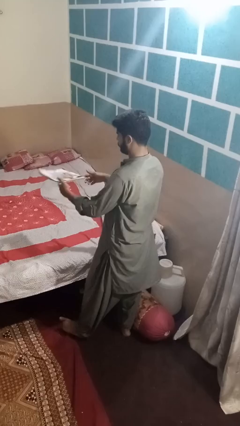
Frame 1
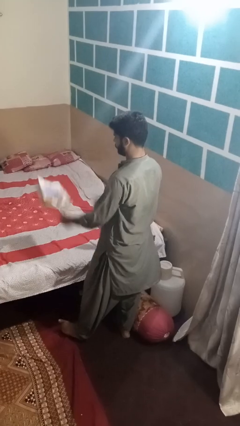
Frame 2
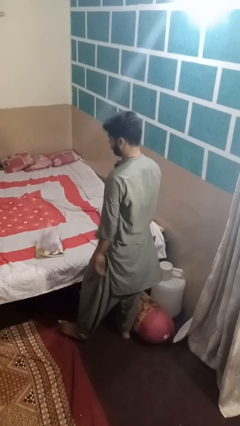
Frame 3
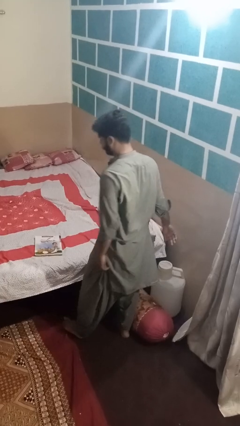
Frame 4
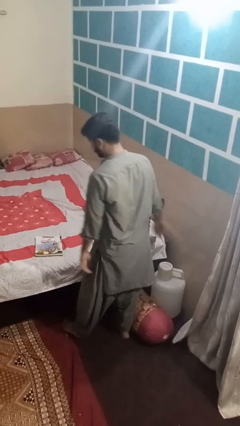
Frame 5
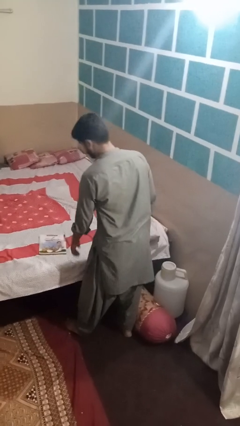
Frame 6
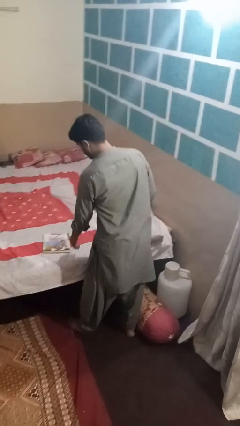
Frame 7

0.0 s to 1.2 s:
person throws object on bed

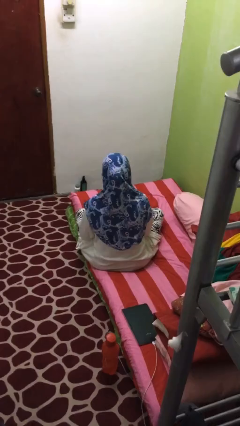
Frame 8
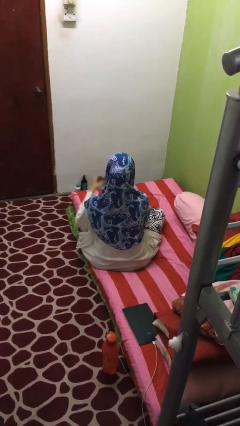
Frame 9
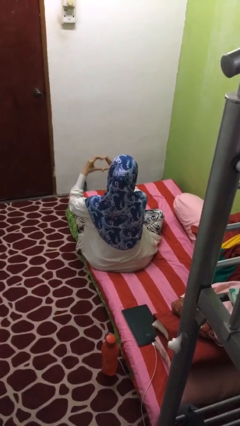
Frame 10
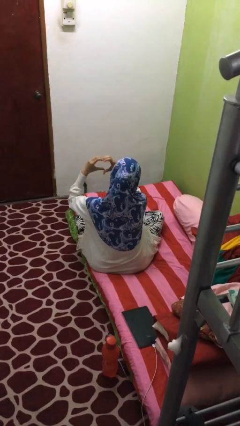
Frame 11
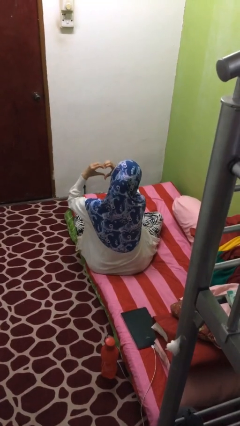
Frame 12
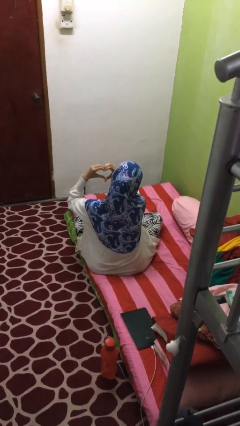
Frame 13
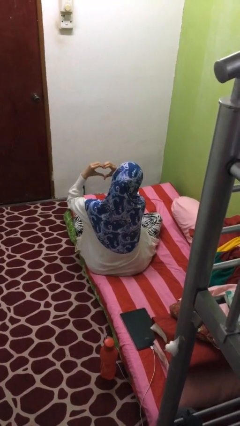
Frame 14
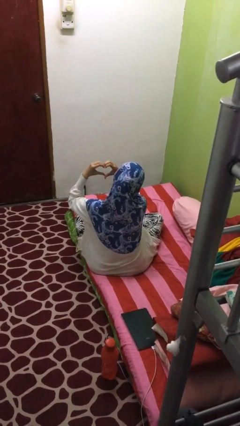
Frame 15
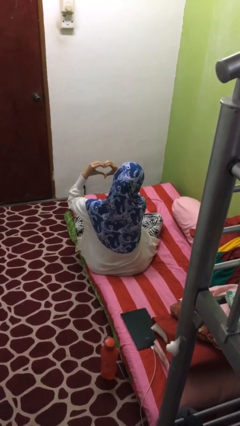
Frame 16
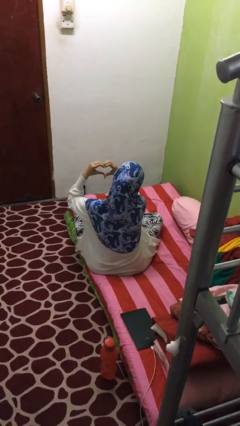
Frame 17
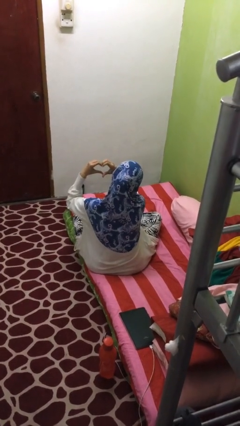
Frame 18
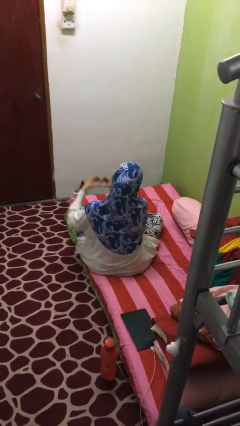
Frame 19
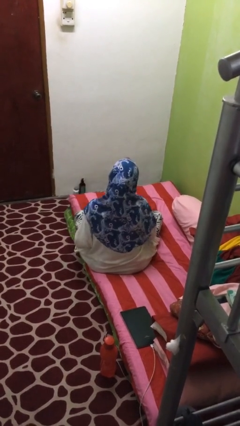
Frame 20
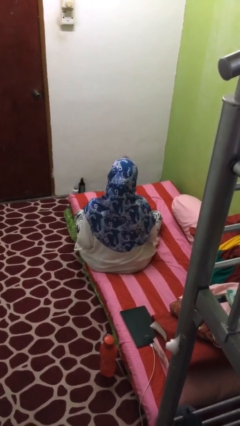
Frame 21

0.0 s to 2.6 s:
person gestures heart

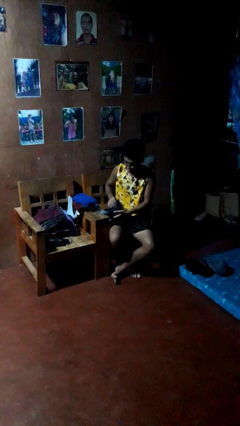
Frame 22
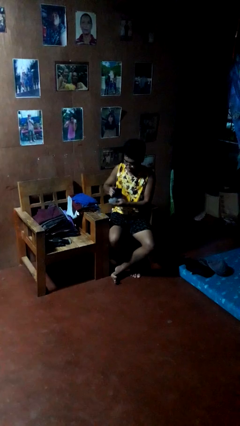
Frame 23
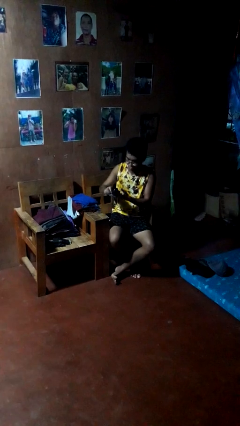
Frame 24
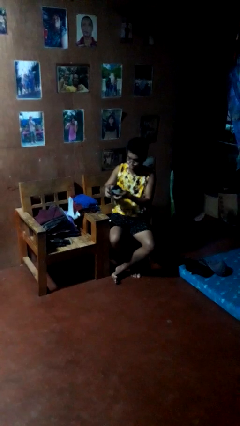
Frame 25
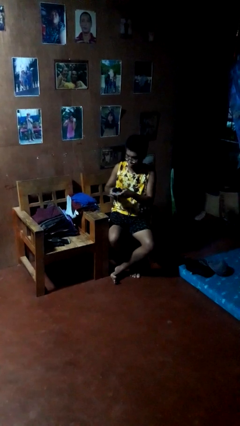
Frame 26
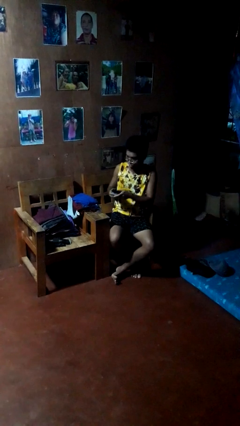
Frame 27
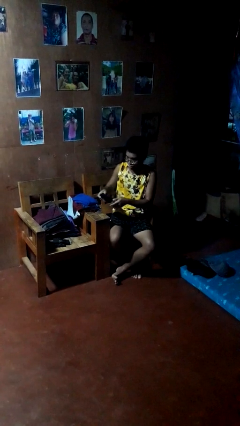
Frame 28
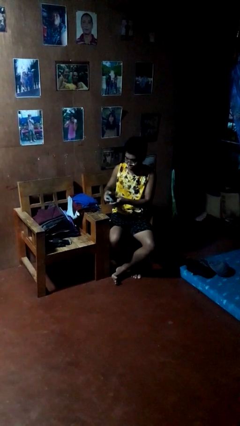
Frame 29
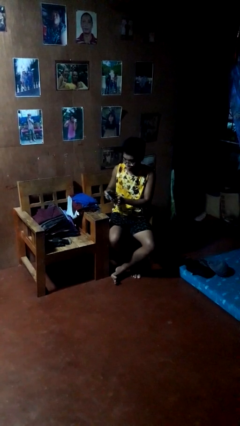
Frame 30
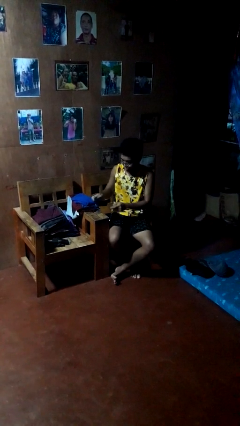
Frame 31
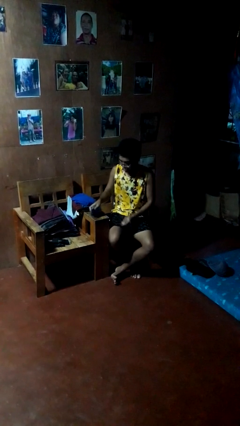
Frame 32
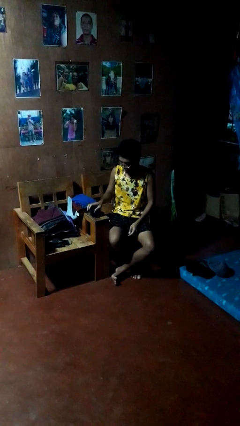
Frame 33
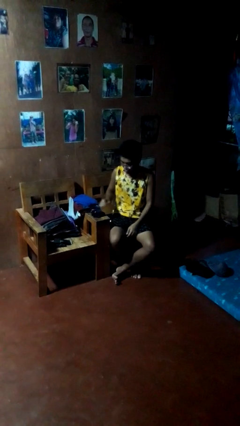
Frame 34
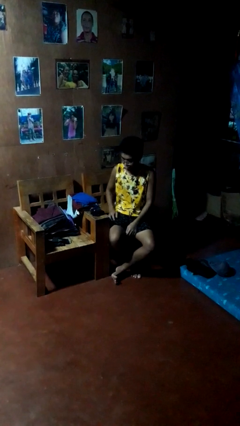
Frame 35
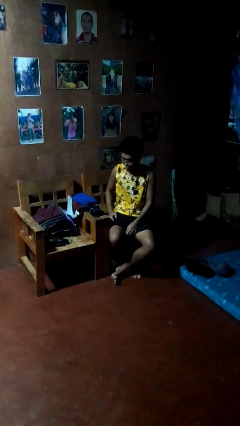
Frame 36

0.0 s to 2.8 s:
person folds socks

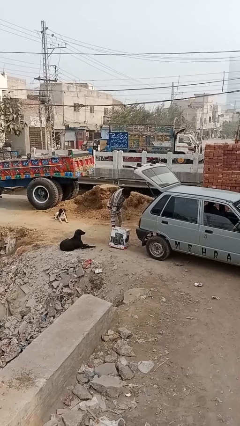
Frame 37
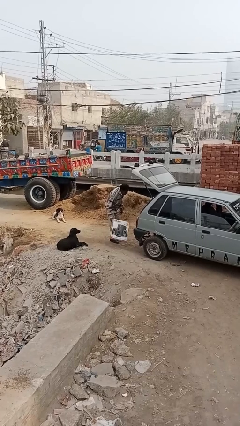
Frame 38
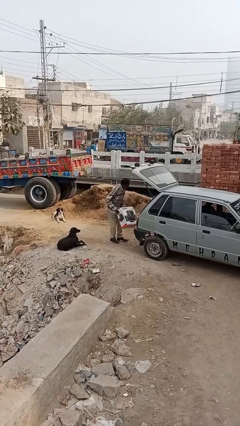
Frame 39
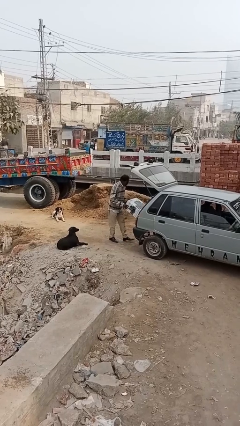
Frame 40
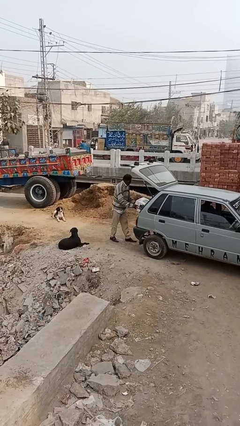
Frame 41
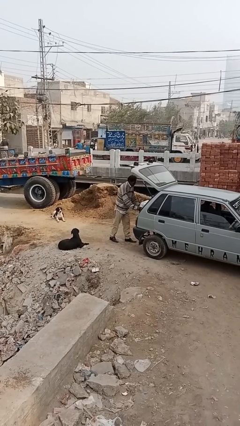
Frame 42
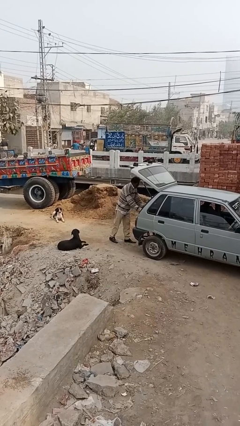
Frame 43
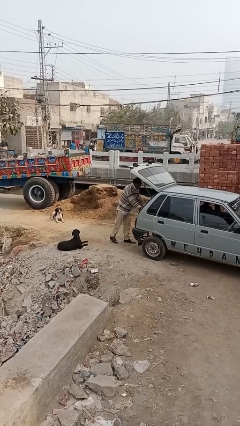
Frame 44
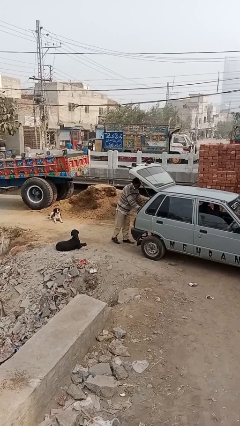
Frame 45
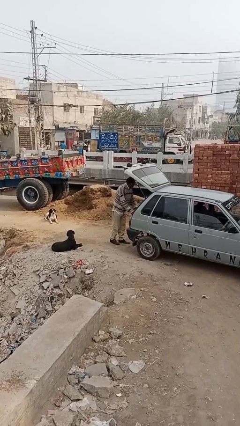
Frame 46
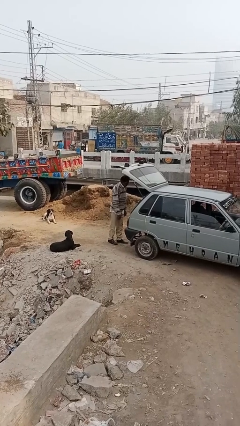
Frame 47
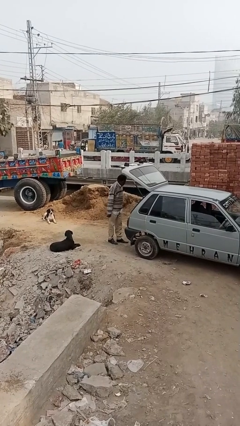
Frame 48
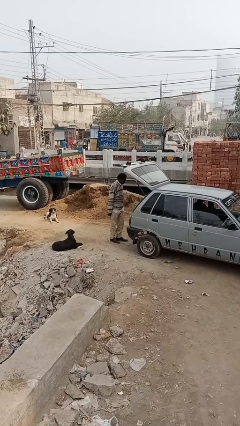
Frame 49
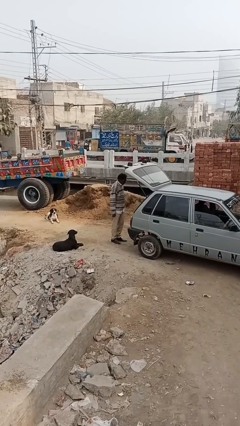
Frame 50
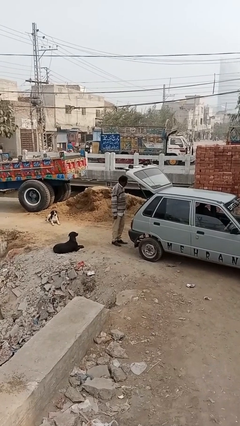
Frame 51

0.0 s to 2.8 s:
person loads car

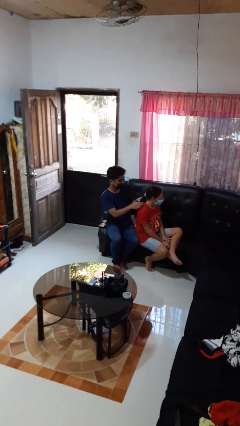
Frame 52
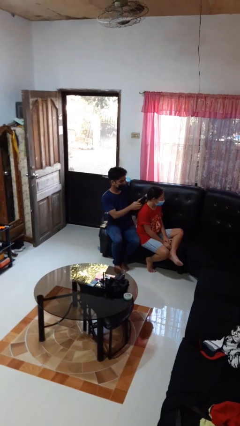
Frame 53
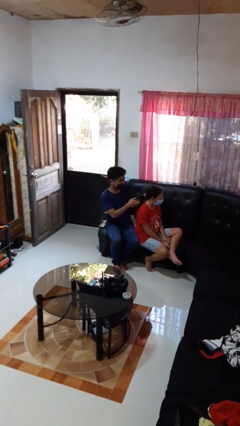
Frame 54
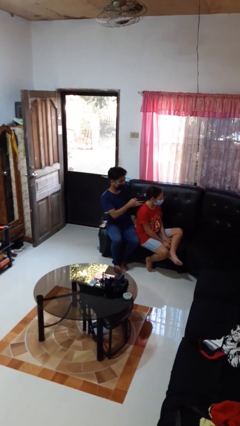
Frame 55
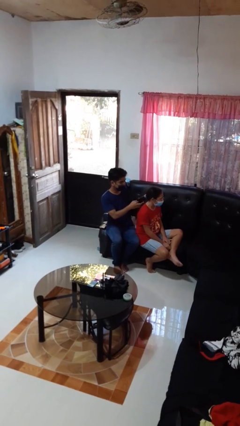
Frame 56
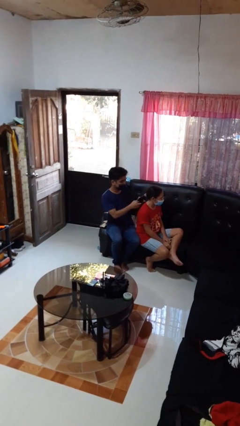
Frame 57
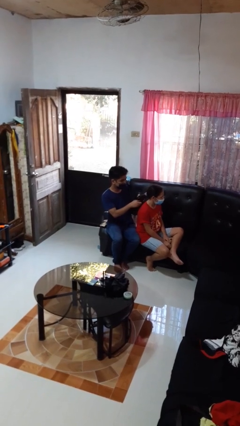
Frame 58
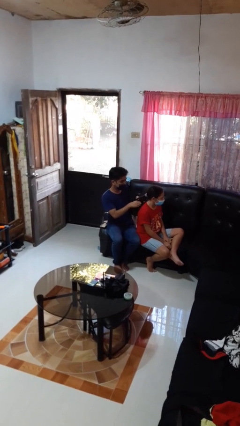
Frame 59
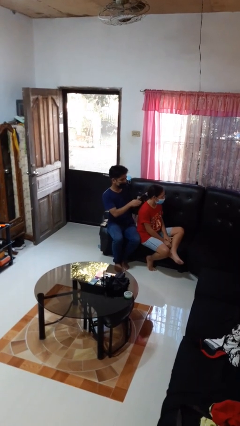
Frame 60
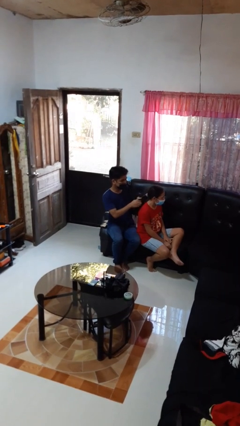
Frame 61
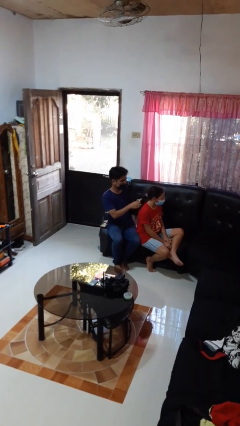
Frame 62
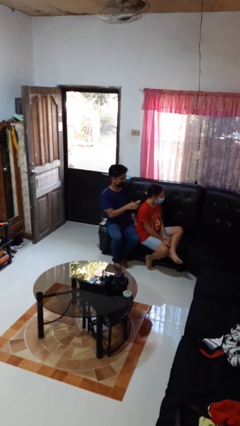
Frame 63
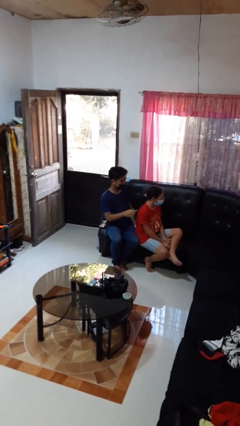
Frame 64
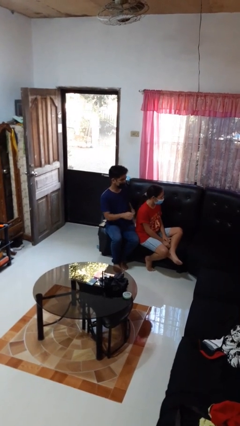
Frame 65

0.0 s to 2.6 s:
person braids hair of person

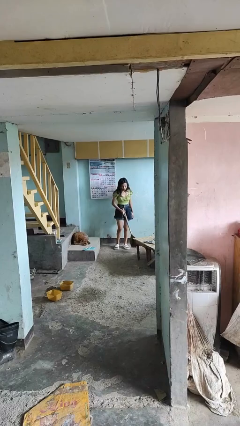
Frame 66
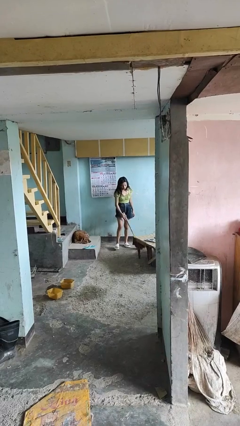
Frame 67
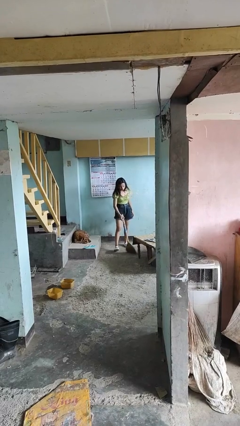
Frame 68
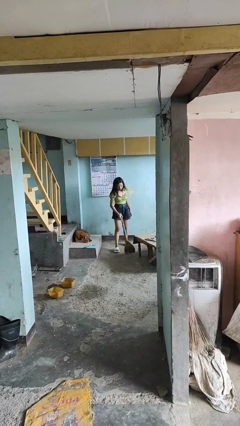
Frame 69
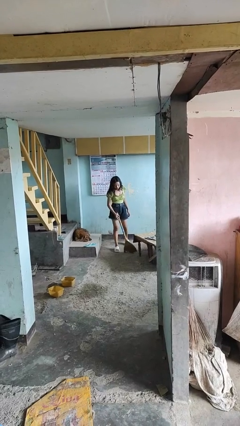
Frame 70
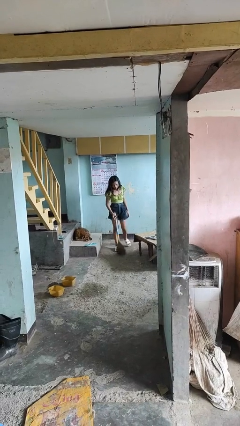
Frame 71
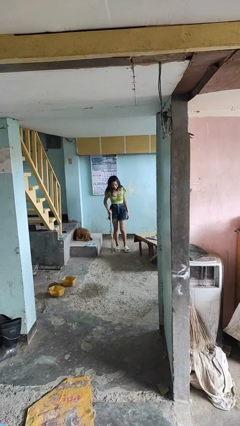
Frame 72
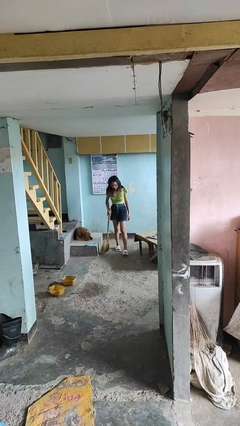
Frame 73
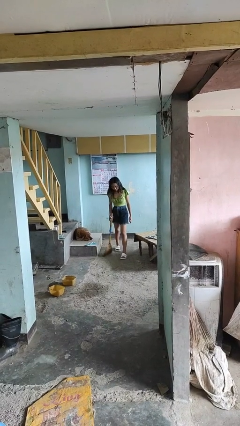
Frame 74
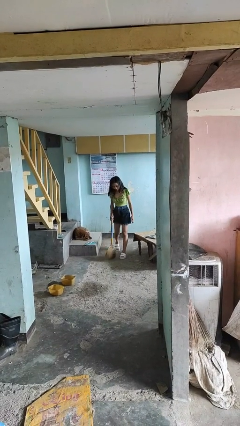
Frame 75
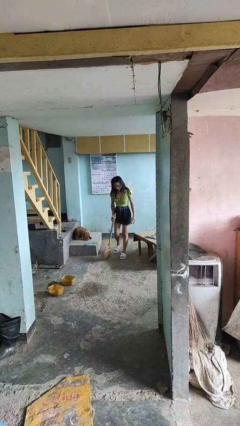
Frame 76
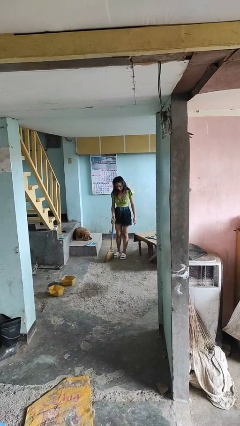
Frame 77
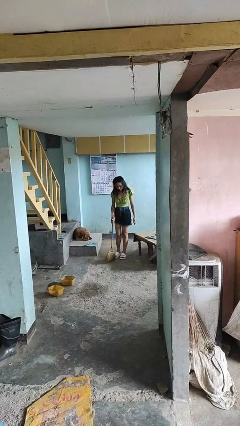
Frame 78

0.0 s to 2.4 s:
person sweeps floor

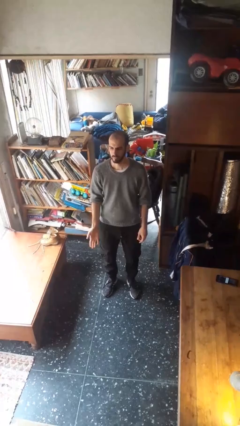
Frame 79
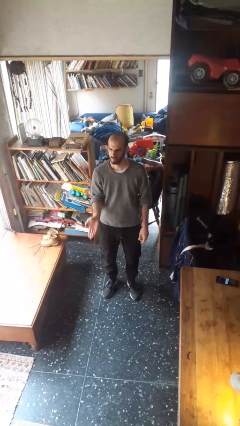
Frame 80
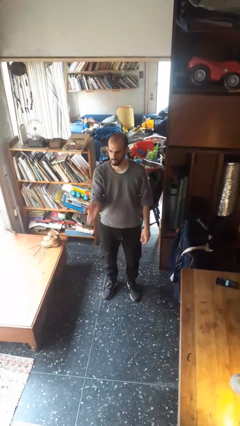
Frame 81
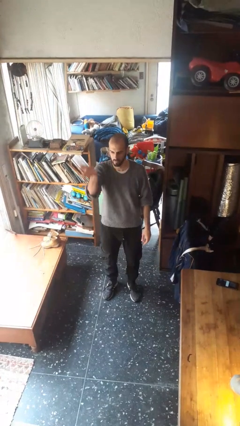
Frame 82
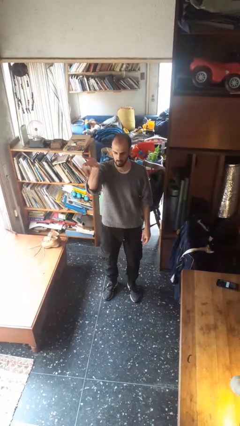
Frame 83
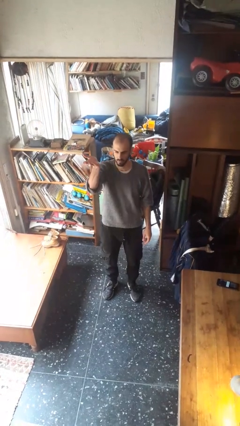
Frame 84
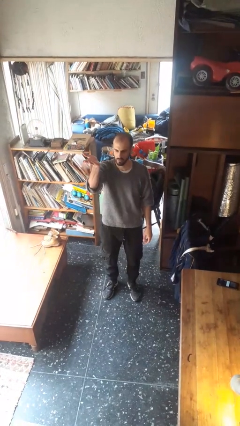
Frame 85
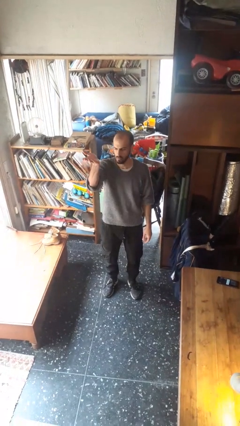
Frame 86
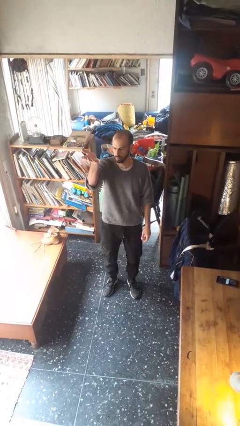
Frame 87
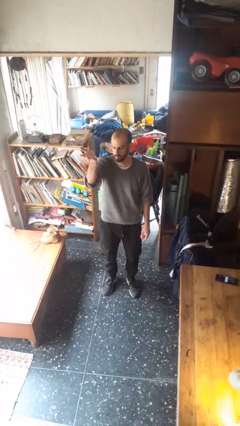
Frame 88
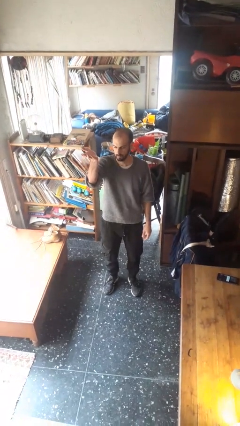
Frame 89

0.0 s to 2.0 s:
person gestures swipe up

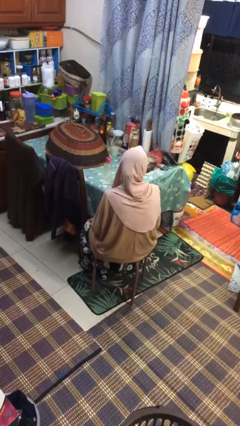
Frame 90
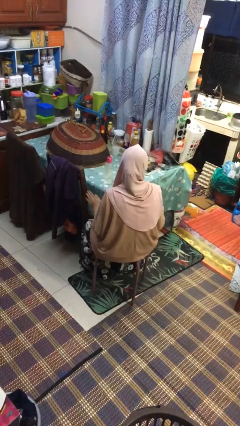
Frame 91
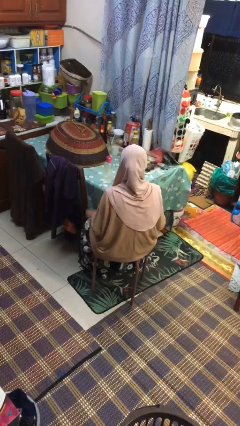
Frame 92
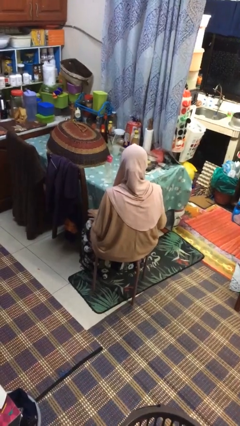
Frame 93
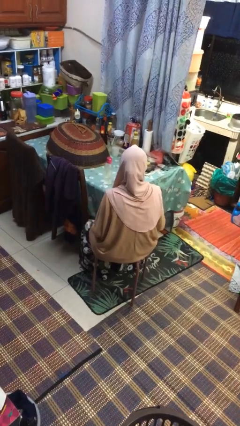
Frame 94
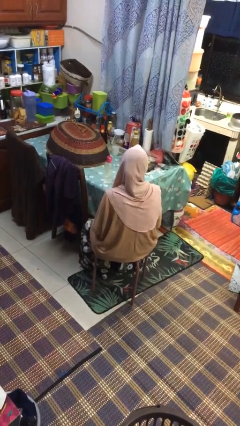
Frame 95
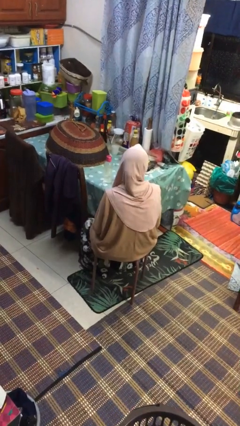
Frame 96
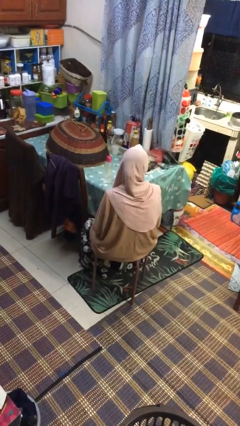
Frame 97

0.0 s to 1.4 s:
person slaps hands on thighs
